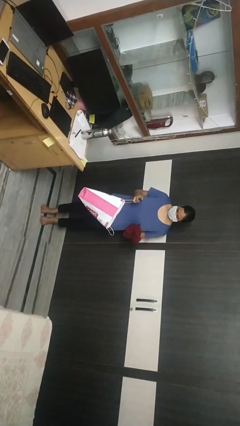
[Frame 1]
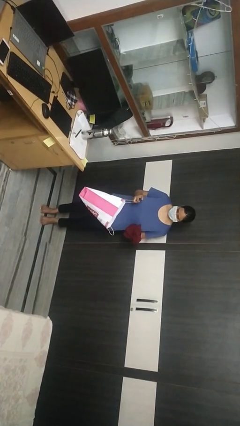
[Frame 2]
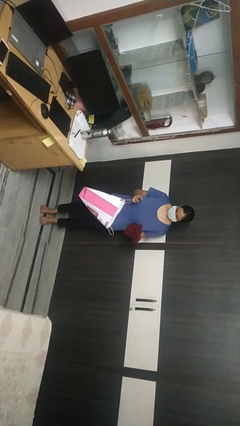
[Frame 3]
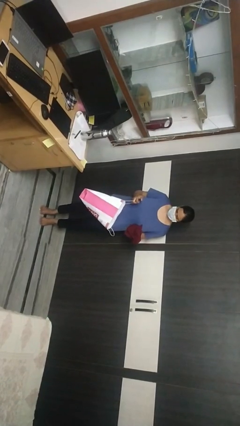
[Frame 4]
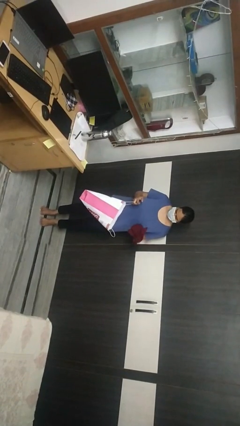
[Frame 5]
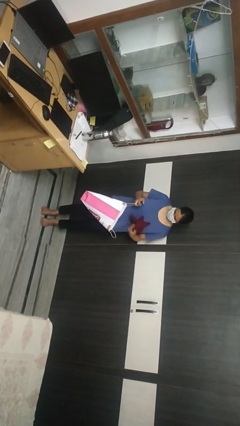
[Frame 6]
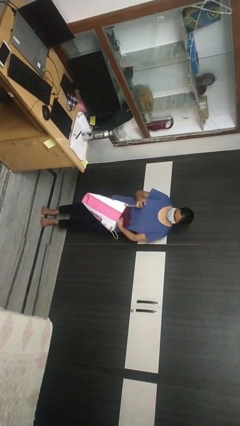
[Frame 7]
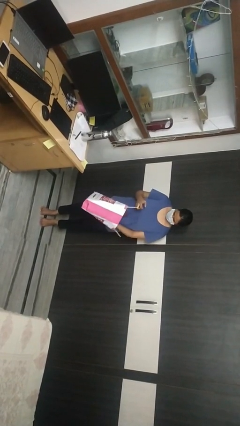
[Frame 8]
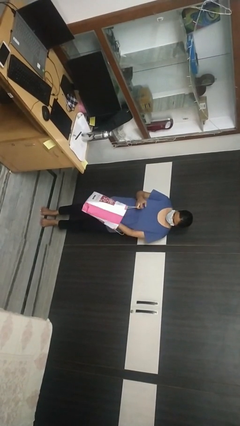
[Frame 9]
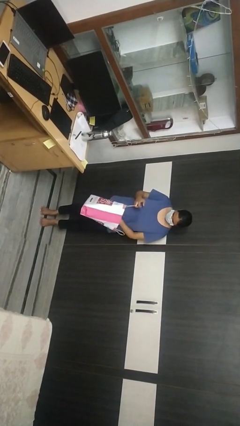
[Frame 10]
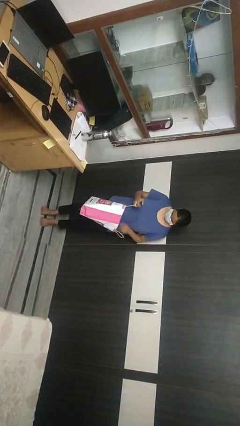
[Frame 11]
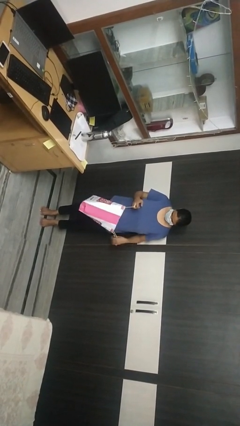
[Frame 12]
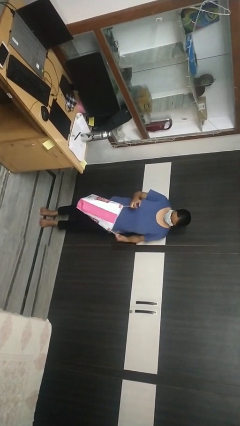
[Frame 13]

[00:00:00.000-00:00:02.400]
person puts object into bag

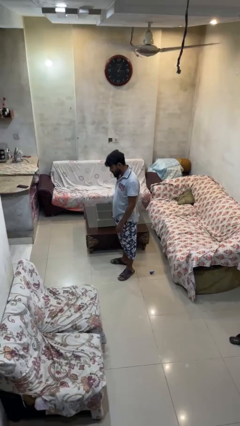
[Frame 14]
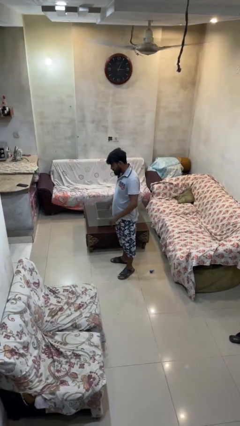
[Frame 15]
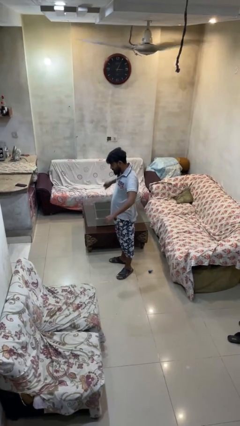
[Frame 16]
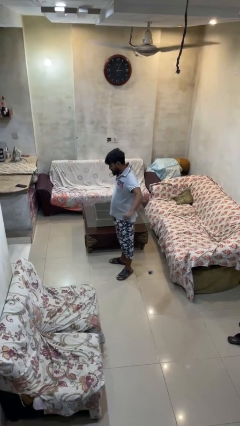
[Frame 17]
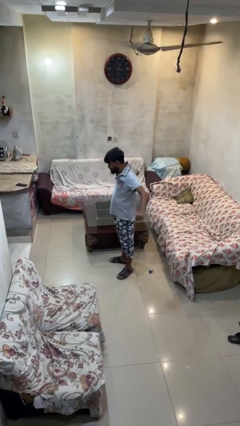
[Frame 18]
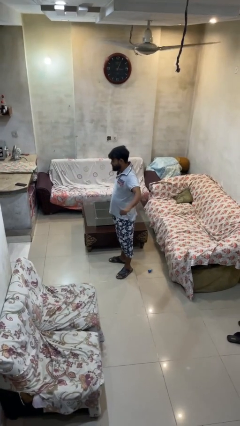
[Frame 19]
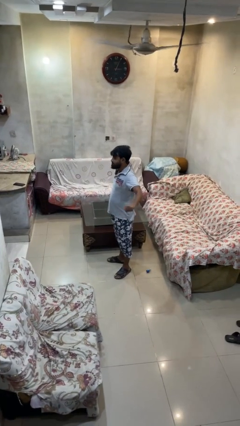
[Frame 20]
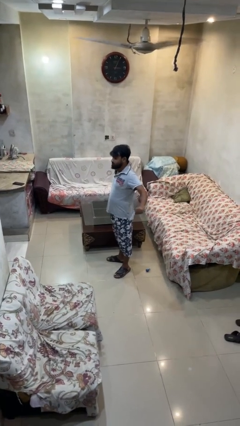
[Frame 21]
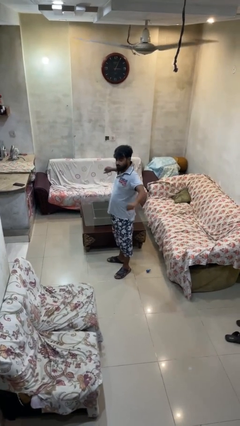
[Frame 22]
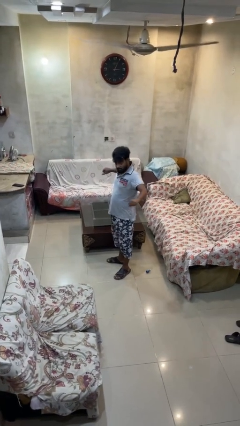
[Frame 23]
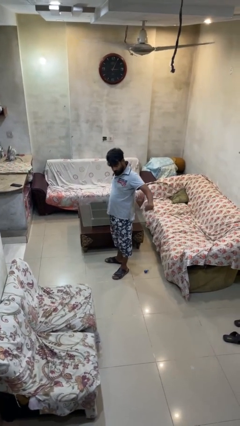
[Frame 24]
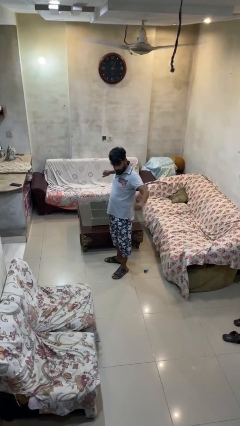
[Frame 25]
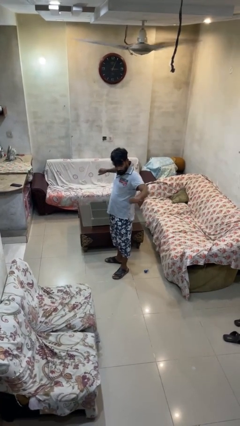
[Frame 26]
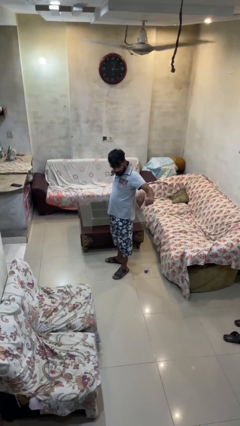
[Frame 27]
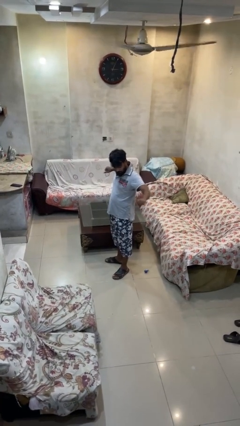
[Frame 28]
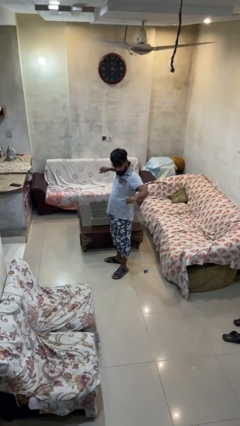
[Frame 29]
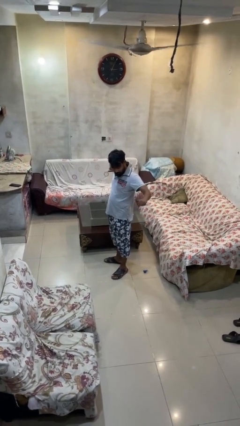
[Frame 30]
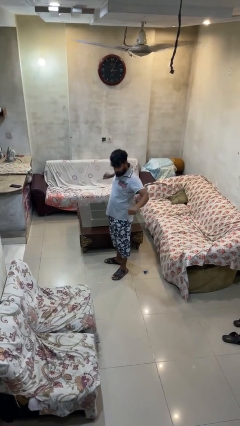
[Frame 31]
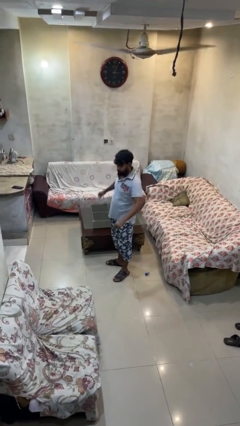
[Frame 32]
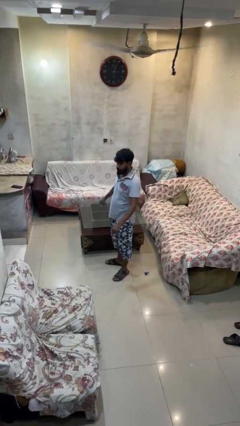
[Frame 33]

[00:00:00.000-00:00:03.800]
person stretches arms to side

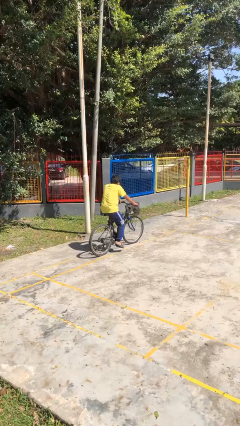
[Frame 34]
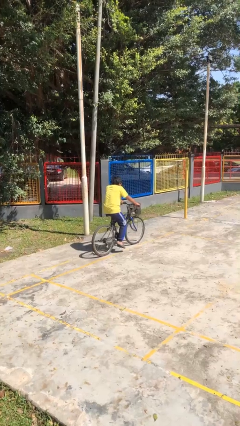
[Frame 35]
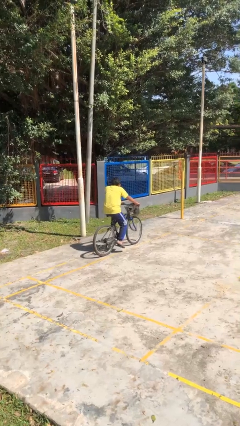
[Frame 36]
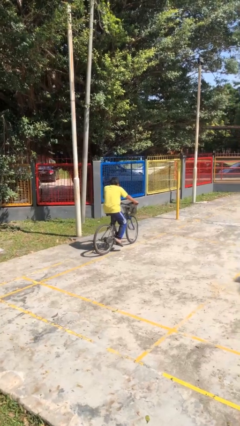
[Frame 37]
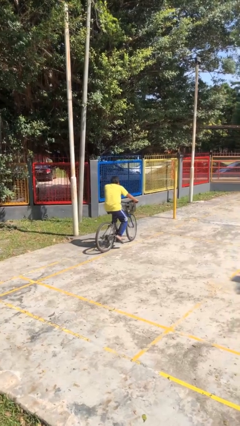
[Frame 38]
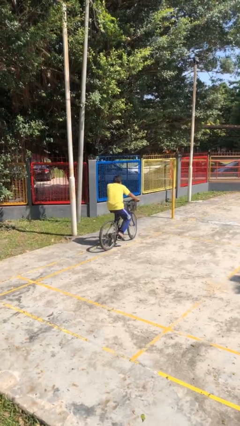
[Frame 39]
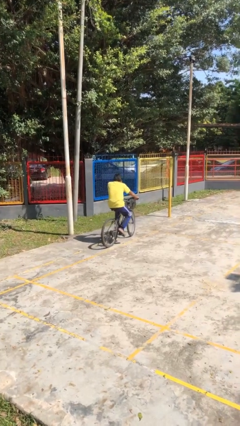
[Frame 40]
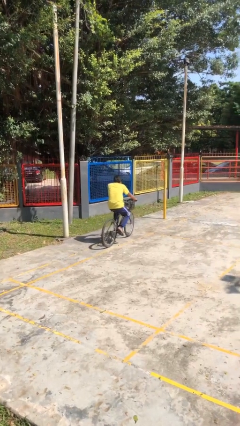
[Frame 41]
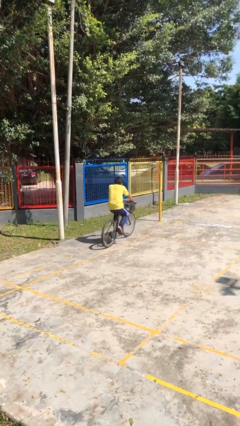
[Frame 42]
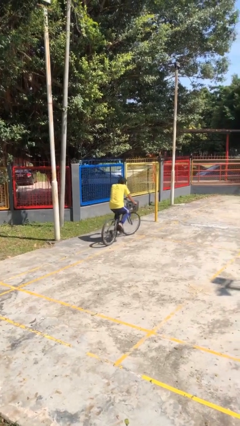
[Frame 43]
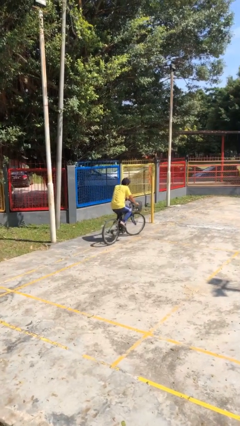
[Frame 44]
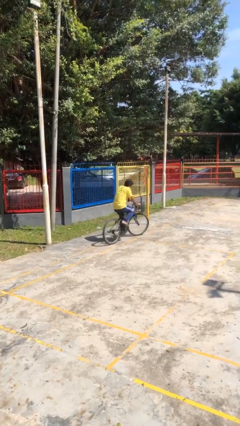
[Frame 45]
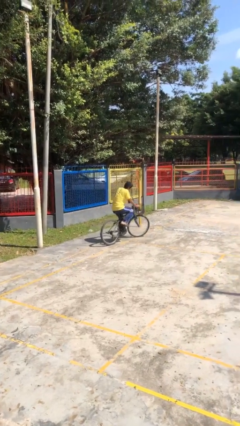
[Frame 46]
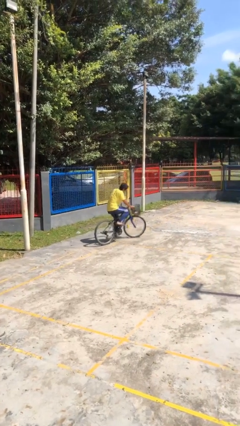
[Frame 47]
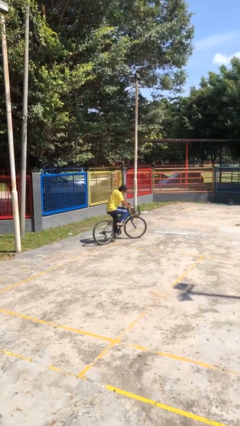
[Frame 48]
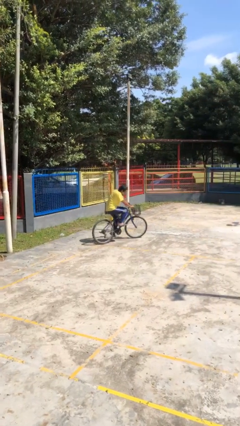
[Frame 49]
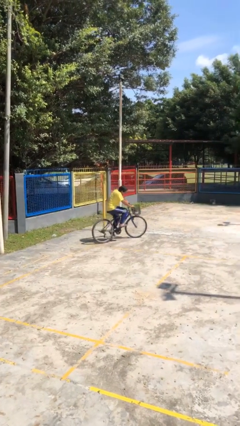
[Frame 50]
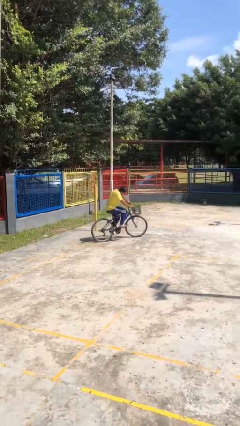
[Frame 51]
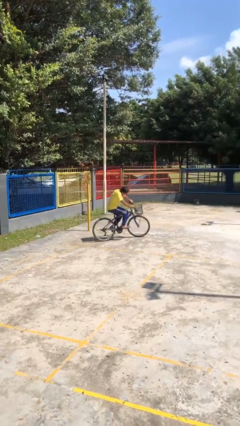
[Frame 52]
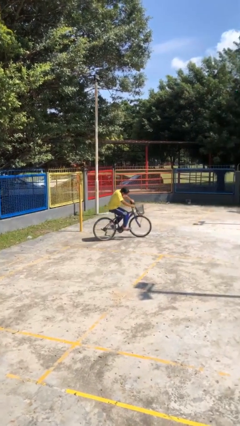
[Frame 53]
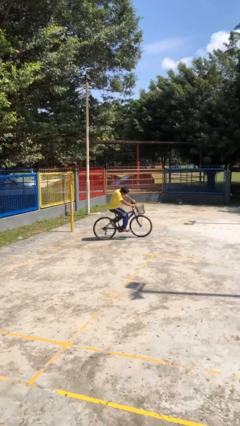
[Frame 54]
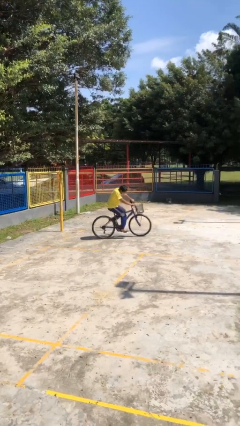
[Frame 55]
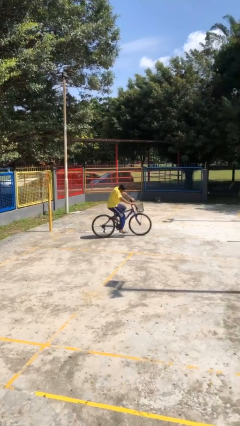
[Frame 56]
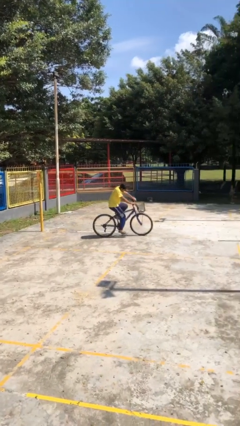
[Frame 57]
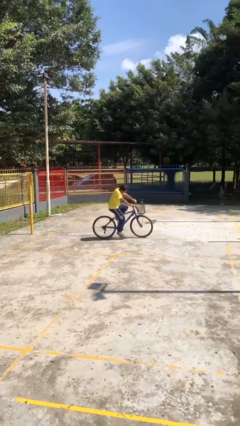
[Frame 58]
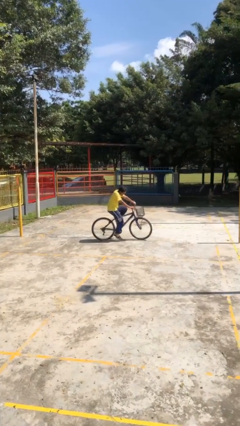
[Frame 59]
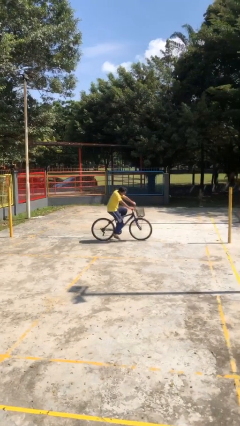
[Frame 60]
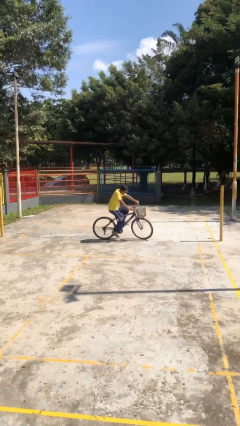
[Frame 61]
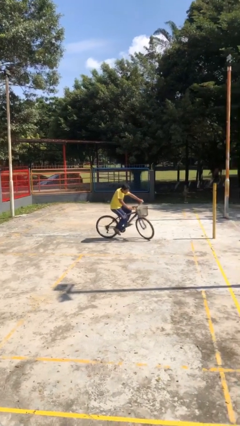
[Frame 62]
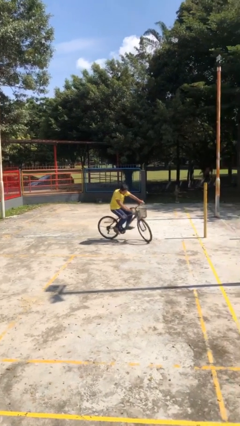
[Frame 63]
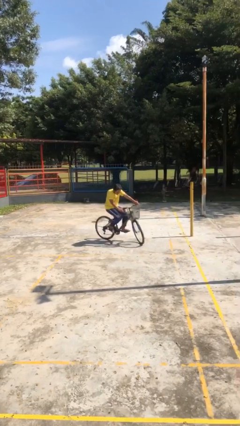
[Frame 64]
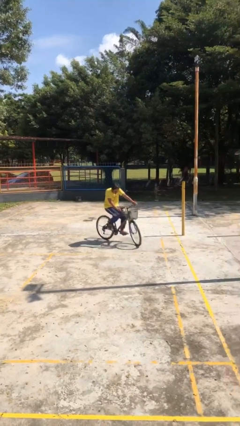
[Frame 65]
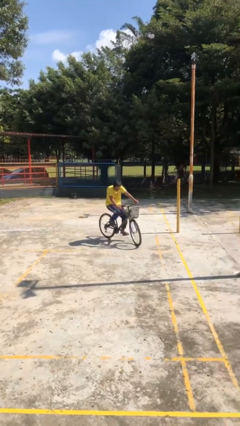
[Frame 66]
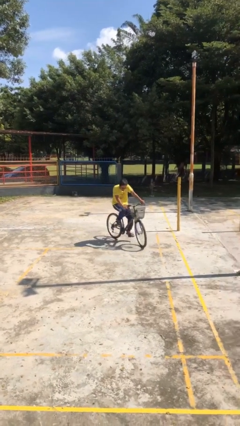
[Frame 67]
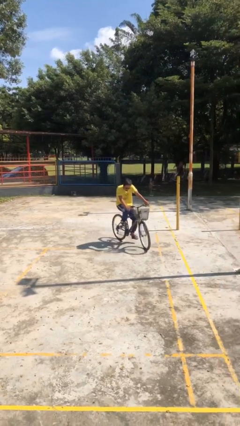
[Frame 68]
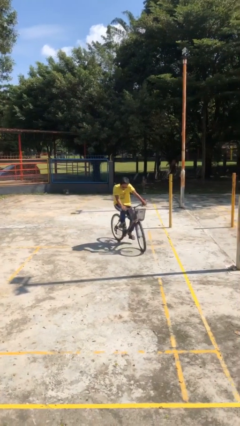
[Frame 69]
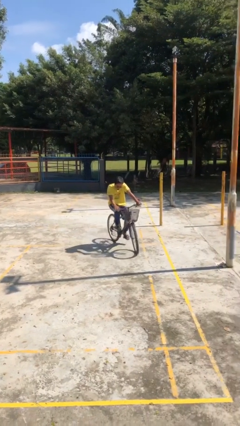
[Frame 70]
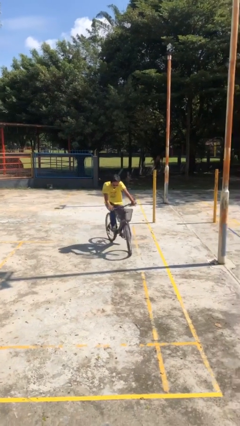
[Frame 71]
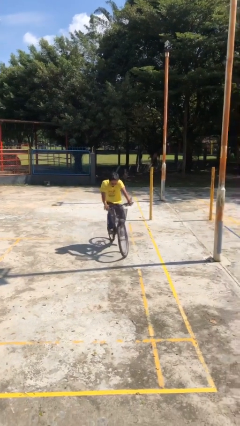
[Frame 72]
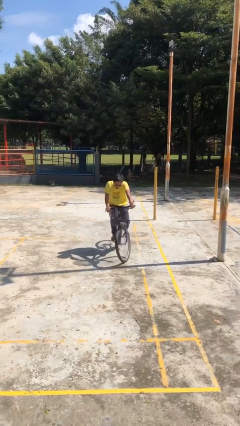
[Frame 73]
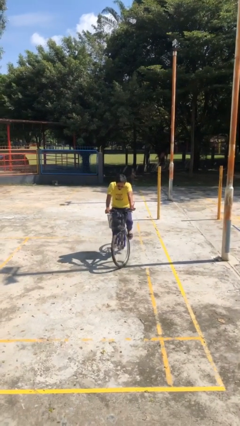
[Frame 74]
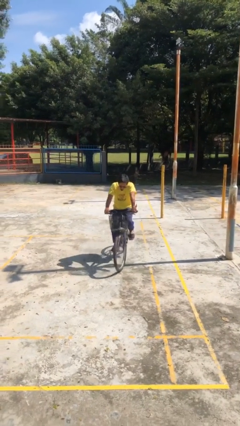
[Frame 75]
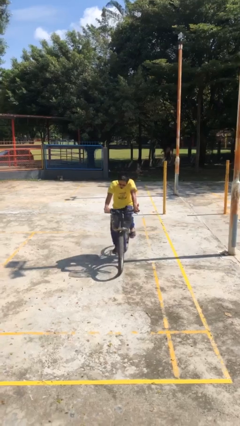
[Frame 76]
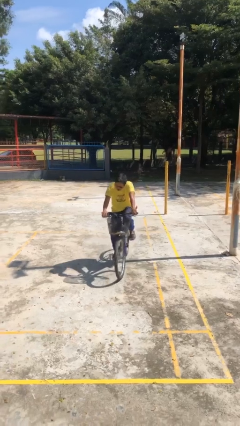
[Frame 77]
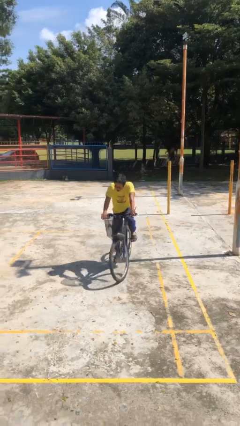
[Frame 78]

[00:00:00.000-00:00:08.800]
person rides bicycle

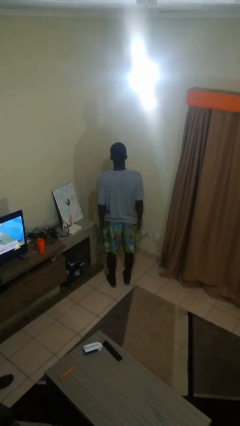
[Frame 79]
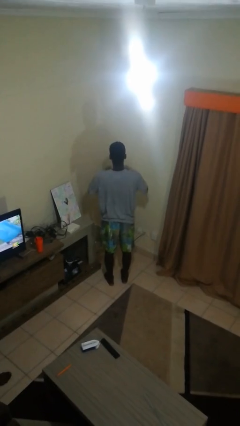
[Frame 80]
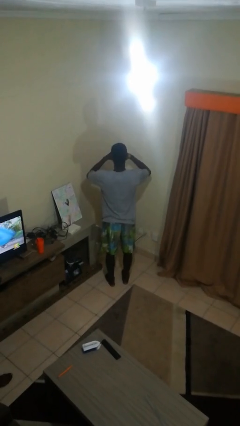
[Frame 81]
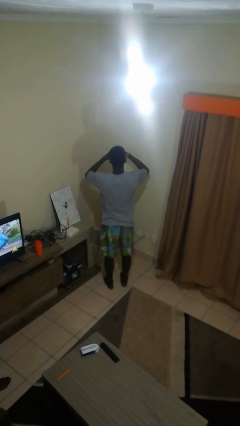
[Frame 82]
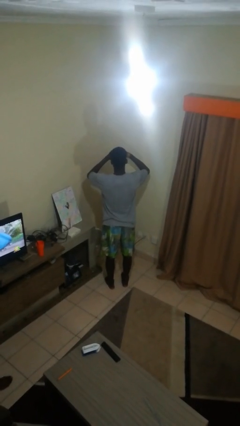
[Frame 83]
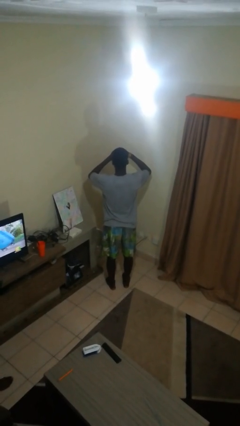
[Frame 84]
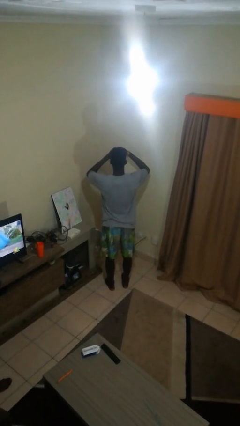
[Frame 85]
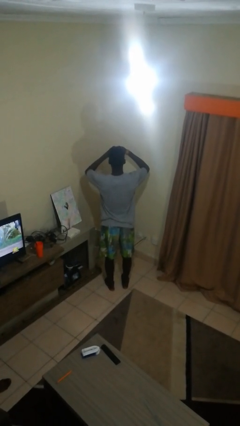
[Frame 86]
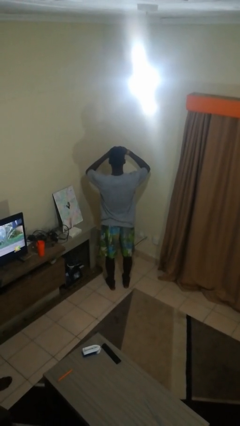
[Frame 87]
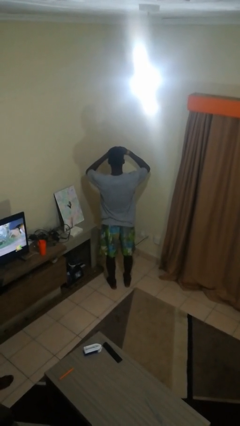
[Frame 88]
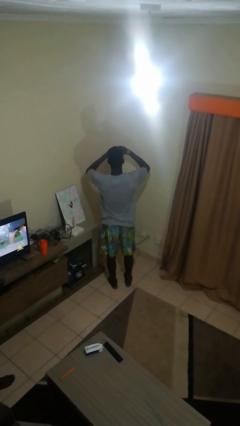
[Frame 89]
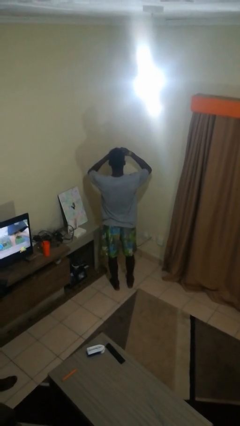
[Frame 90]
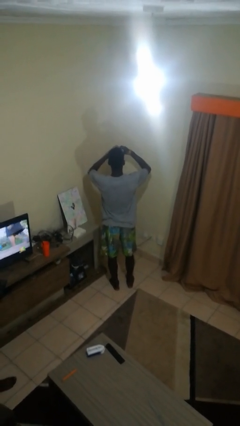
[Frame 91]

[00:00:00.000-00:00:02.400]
person gestures heart

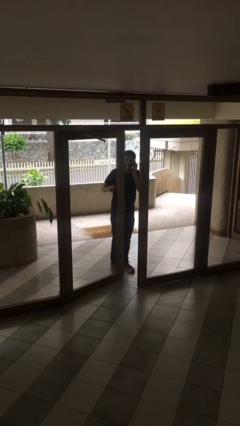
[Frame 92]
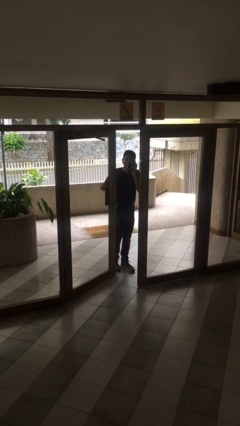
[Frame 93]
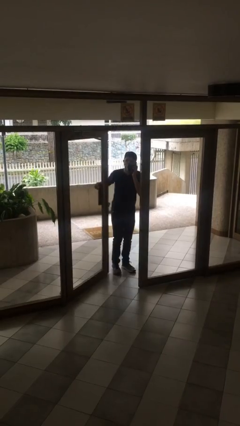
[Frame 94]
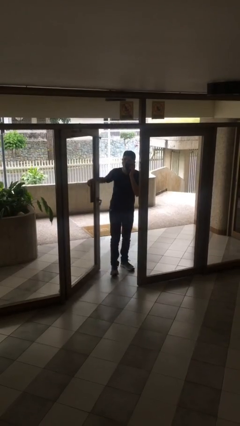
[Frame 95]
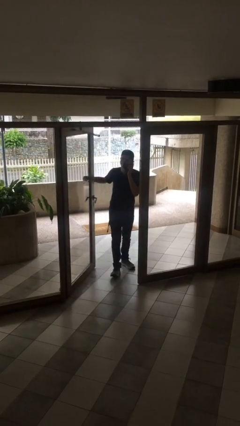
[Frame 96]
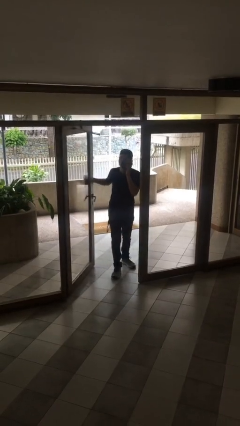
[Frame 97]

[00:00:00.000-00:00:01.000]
person opens facility door
